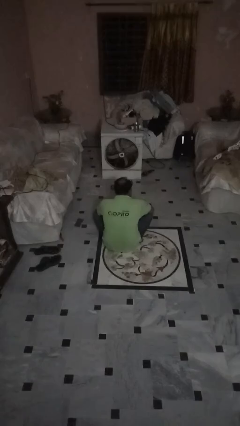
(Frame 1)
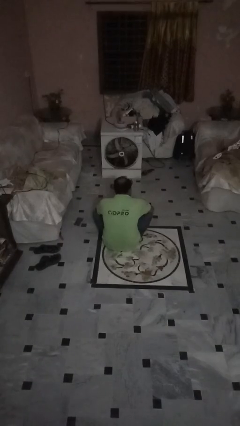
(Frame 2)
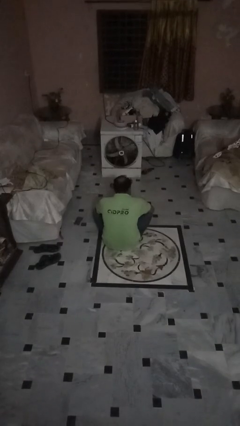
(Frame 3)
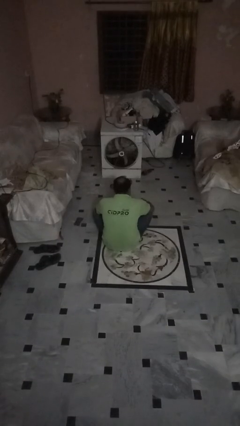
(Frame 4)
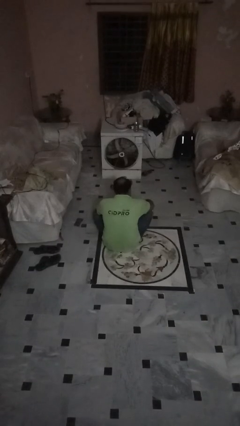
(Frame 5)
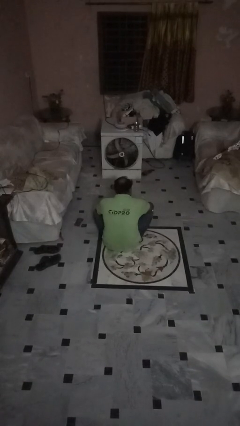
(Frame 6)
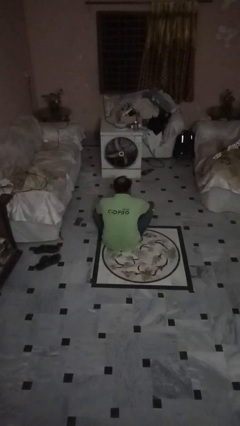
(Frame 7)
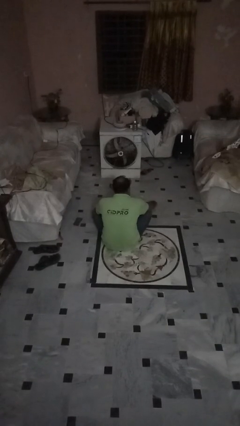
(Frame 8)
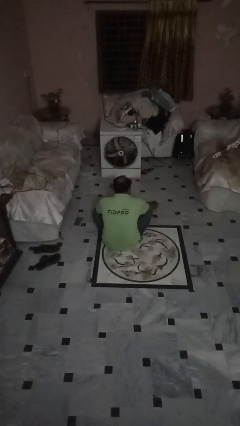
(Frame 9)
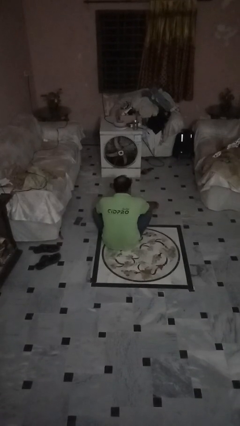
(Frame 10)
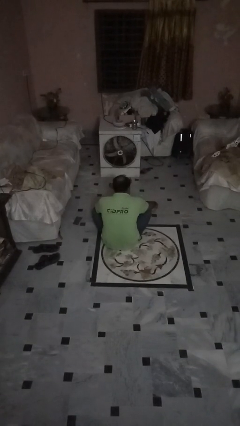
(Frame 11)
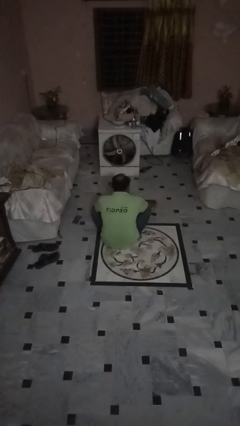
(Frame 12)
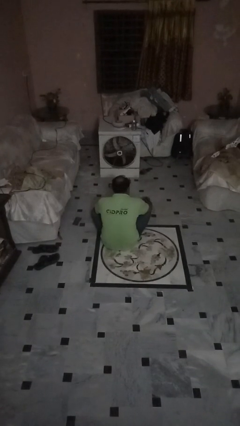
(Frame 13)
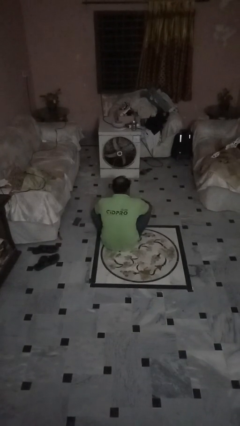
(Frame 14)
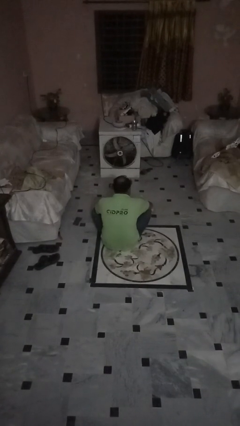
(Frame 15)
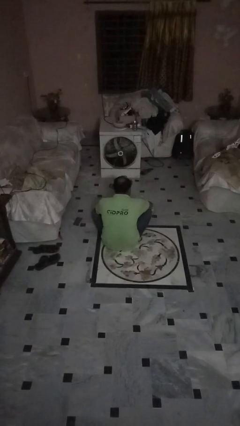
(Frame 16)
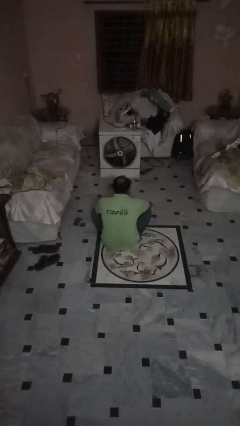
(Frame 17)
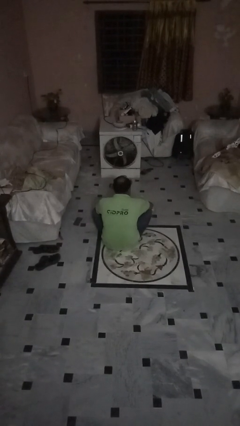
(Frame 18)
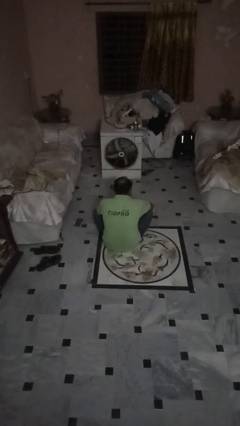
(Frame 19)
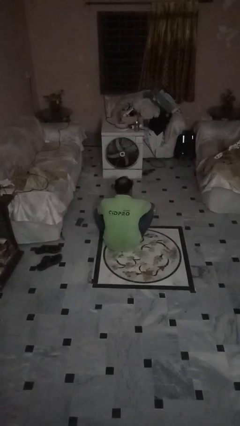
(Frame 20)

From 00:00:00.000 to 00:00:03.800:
person sets upright glass

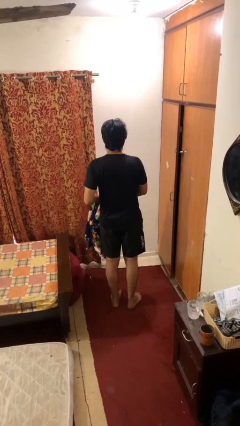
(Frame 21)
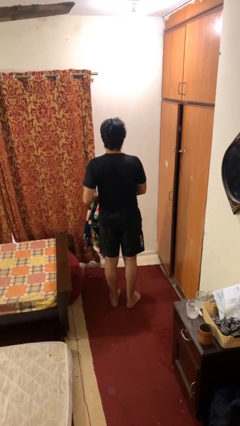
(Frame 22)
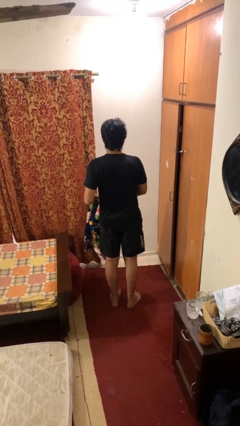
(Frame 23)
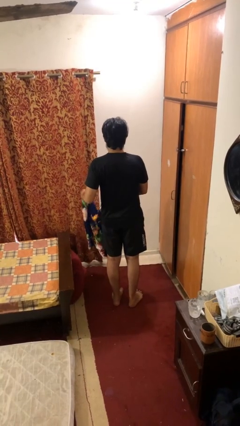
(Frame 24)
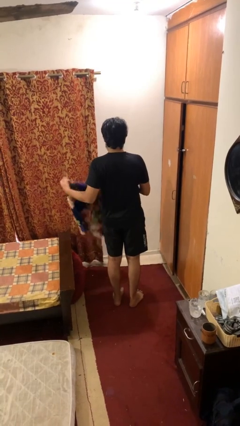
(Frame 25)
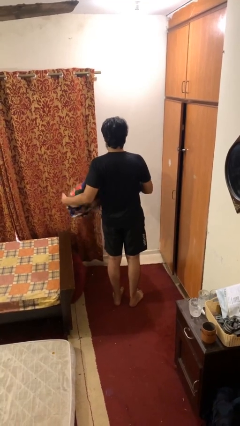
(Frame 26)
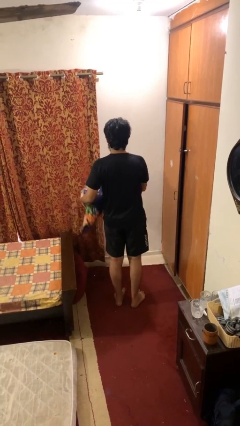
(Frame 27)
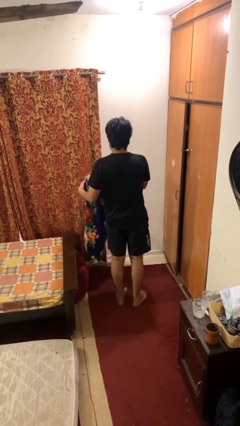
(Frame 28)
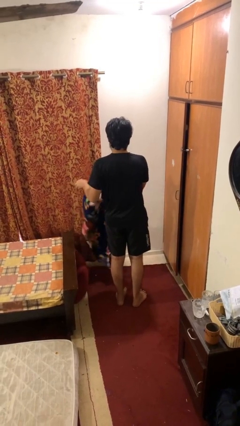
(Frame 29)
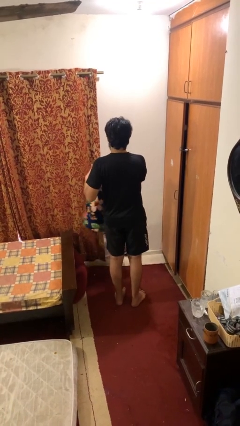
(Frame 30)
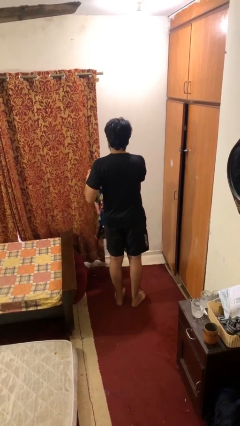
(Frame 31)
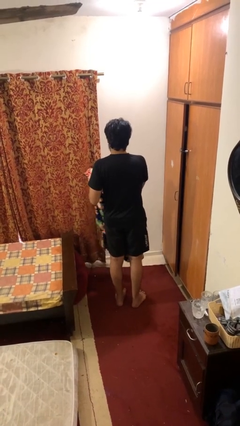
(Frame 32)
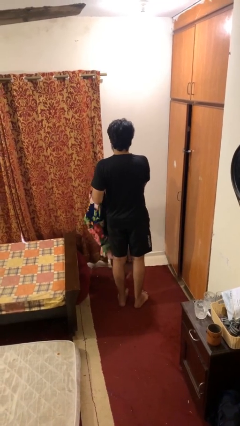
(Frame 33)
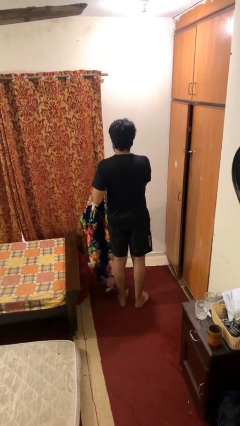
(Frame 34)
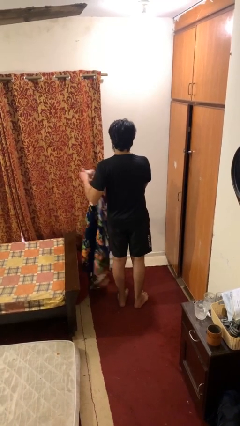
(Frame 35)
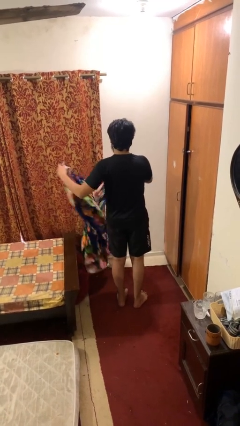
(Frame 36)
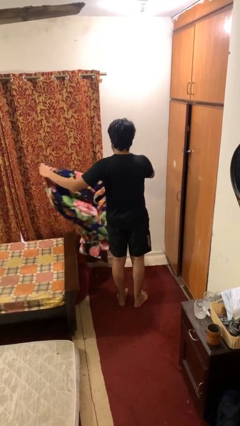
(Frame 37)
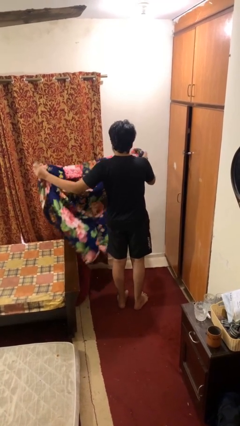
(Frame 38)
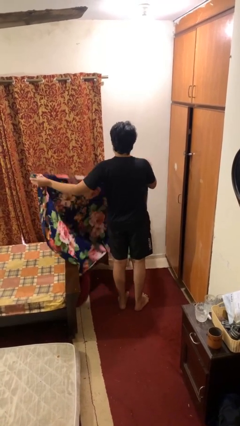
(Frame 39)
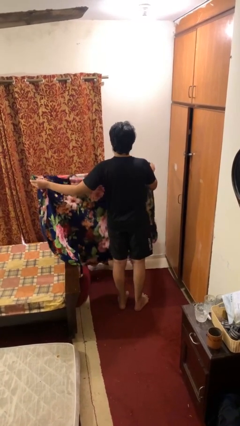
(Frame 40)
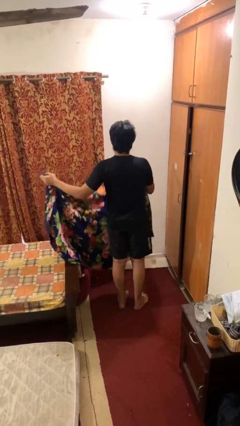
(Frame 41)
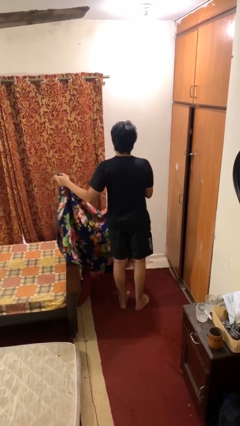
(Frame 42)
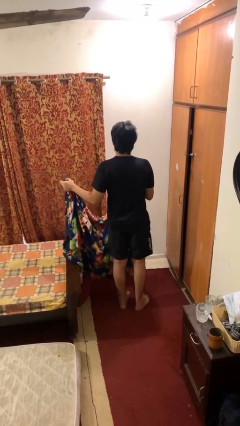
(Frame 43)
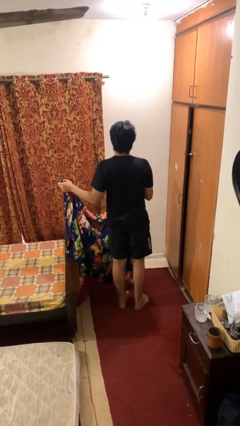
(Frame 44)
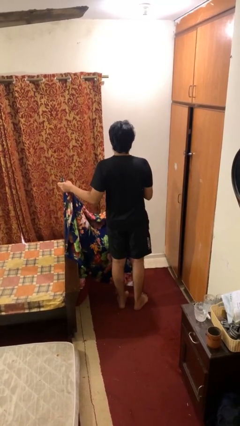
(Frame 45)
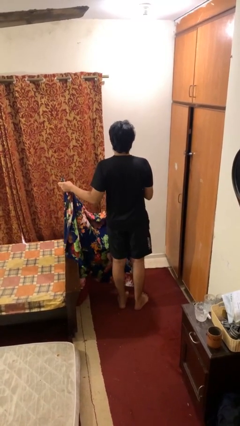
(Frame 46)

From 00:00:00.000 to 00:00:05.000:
person unfolds blanket

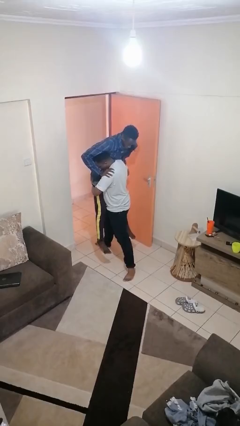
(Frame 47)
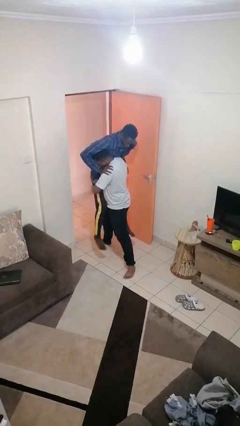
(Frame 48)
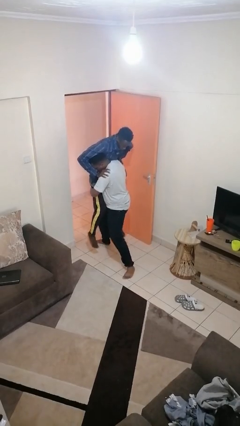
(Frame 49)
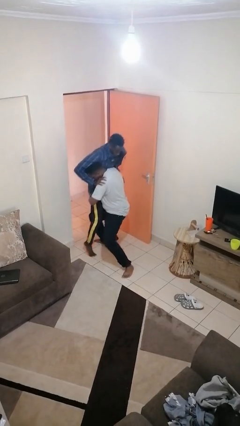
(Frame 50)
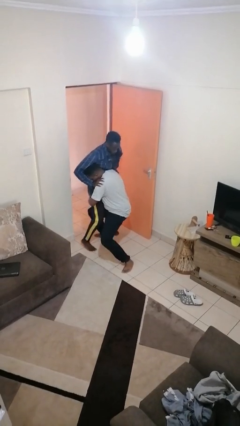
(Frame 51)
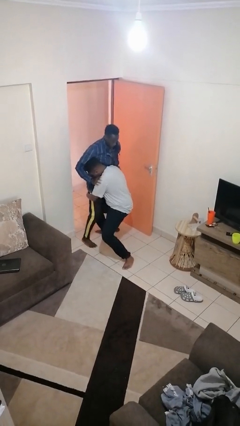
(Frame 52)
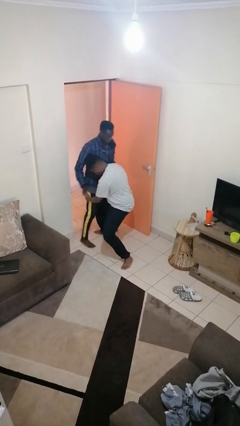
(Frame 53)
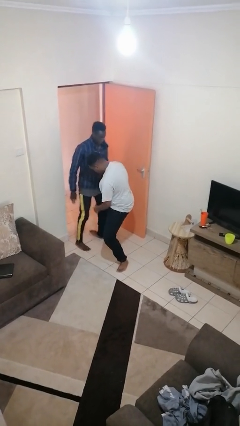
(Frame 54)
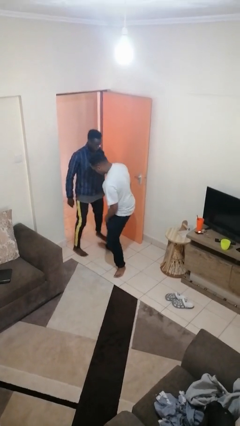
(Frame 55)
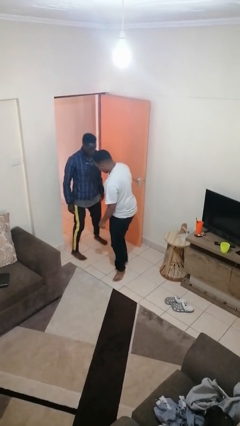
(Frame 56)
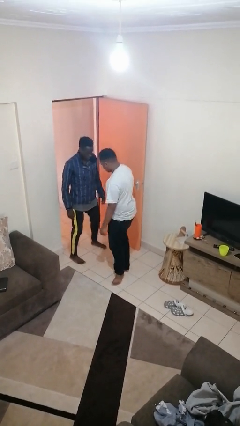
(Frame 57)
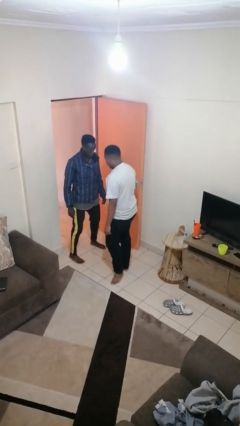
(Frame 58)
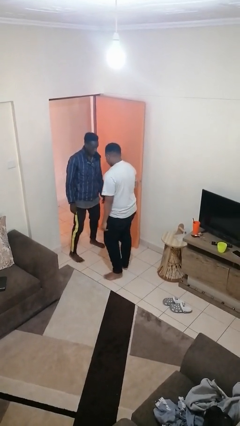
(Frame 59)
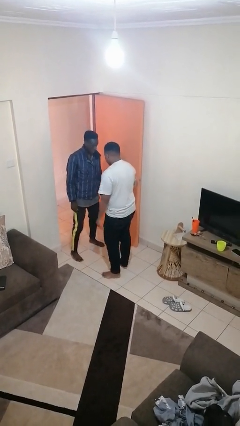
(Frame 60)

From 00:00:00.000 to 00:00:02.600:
person puts down person

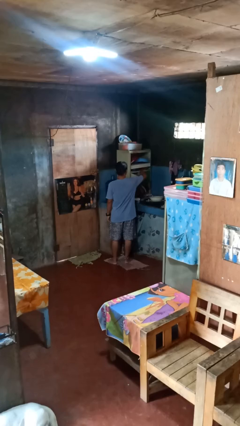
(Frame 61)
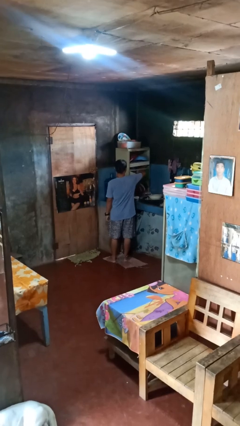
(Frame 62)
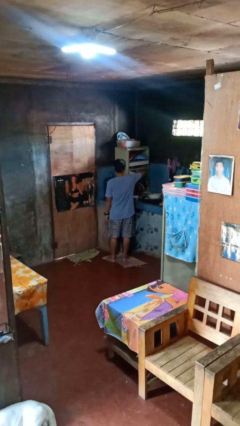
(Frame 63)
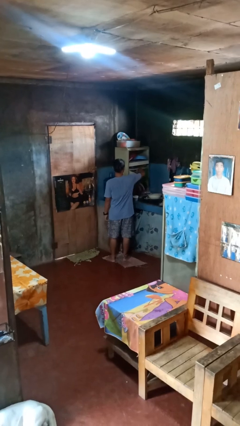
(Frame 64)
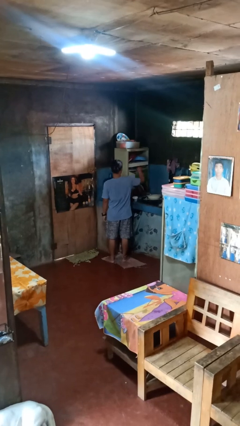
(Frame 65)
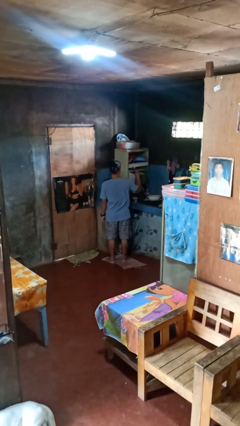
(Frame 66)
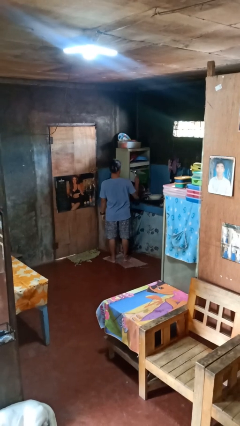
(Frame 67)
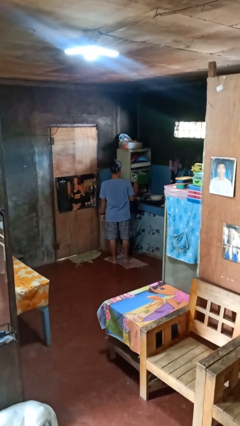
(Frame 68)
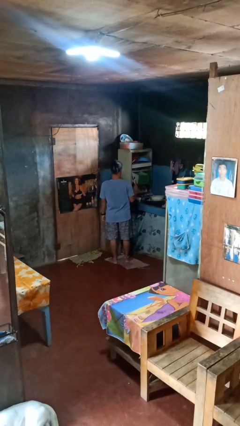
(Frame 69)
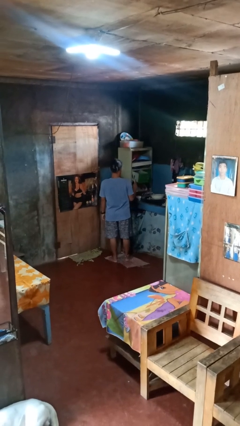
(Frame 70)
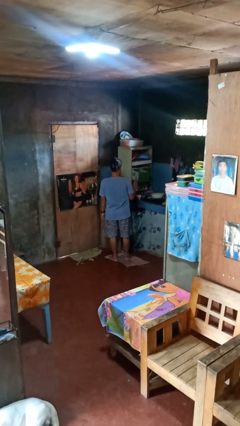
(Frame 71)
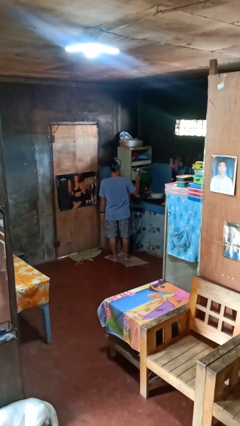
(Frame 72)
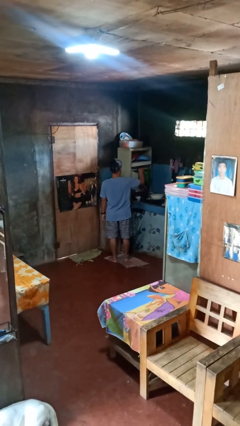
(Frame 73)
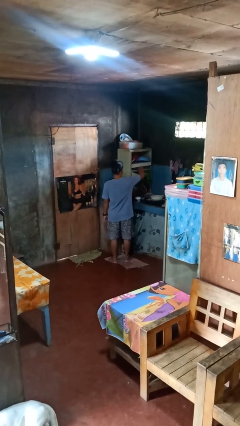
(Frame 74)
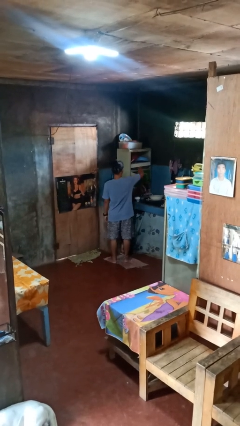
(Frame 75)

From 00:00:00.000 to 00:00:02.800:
person takes object from kitchen drawer

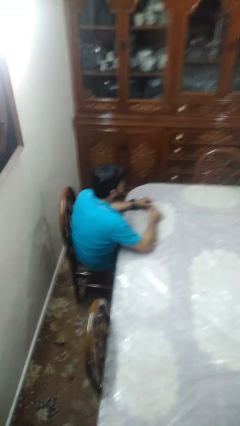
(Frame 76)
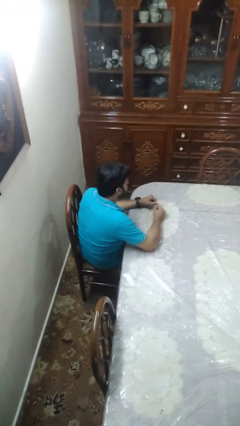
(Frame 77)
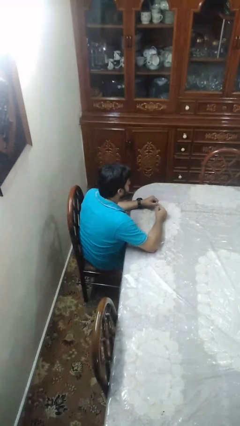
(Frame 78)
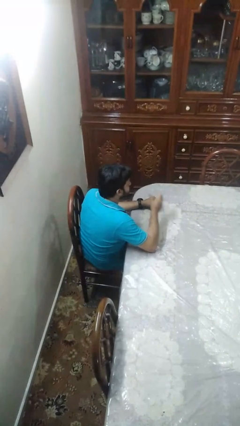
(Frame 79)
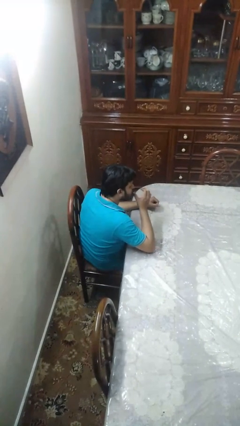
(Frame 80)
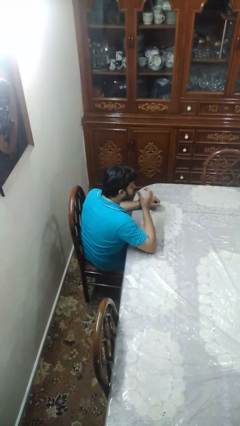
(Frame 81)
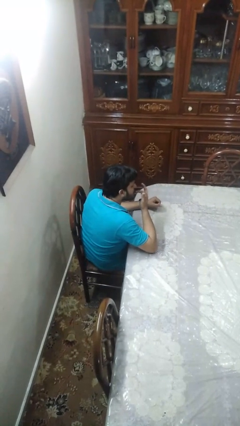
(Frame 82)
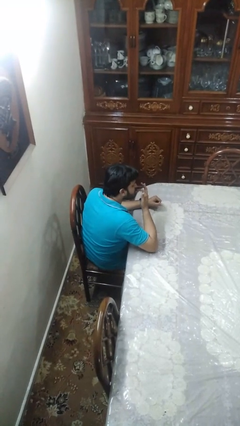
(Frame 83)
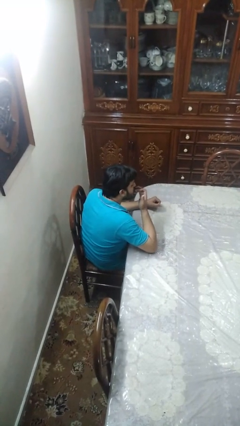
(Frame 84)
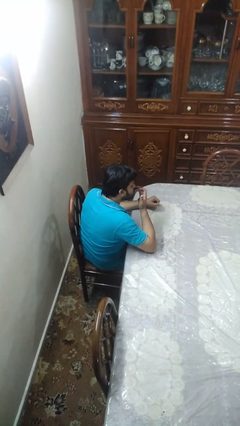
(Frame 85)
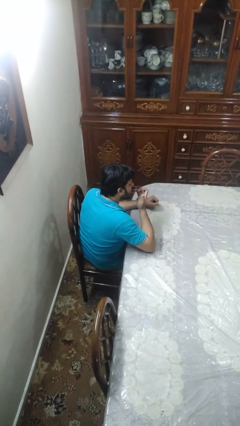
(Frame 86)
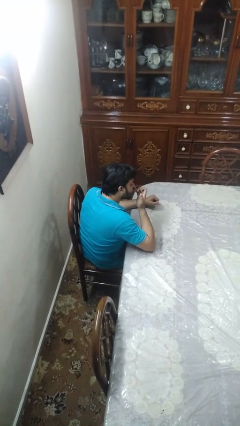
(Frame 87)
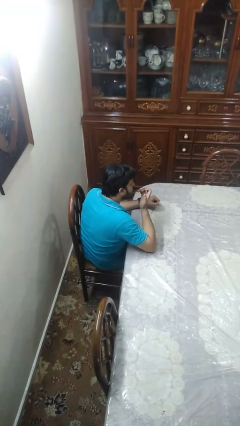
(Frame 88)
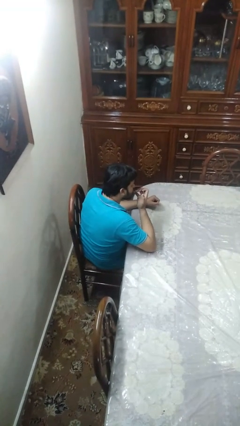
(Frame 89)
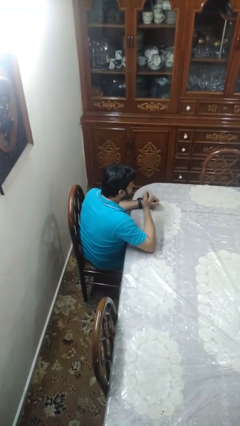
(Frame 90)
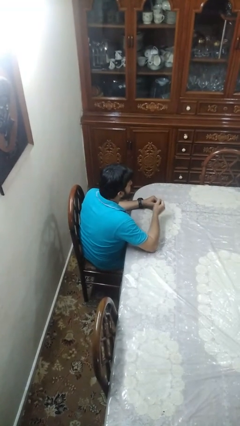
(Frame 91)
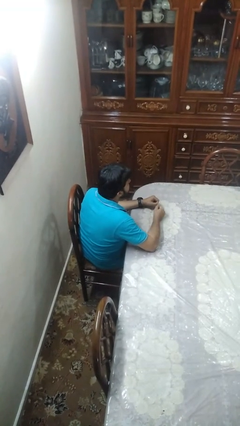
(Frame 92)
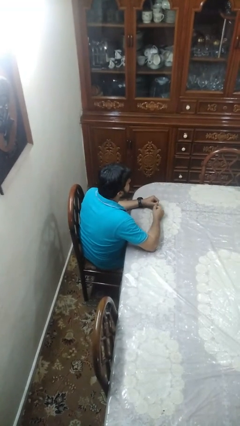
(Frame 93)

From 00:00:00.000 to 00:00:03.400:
person licks fingers
